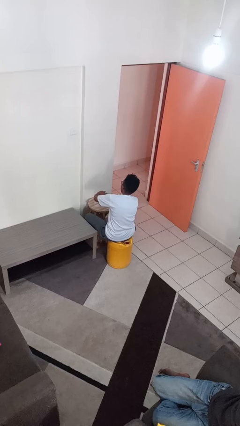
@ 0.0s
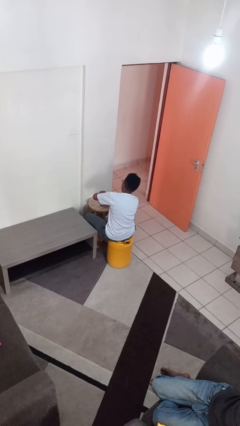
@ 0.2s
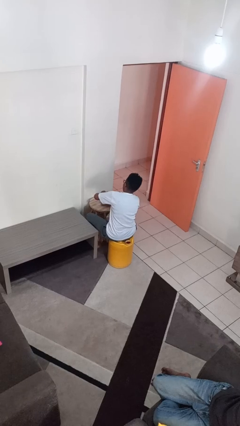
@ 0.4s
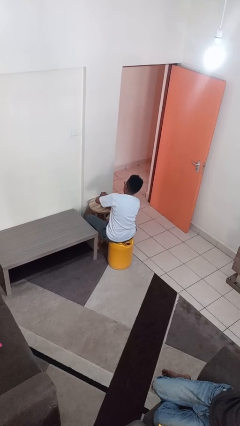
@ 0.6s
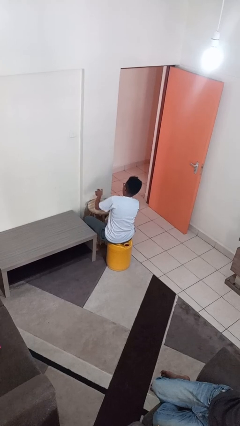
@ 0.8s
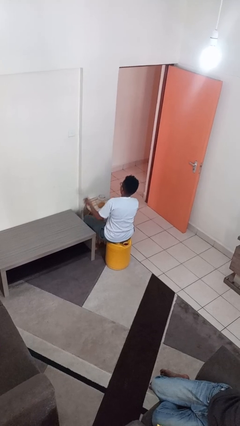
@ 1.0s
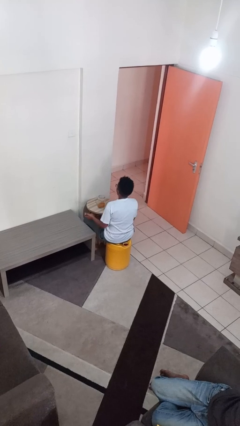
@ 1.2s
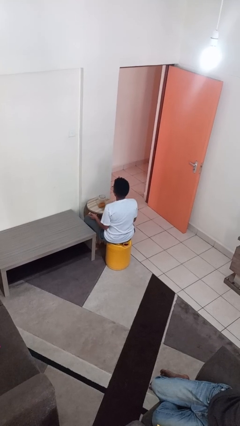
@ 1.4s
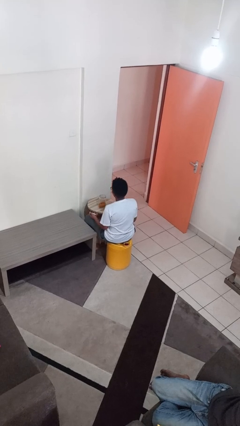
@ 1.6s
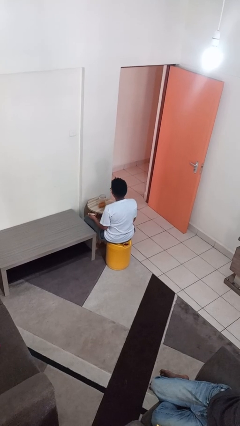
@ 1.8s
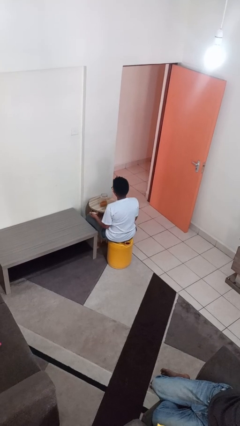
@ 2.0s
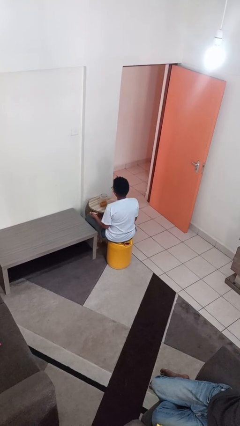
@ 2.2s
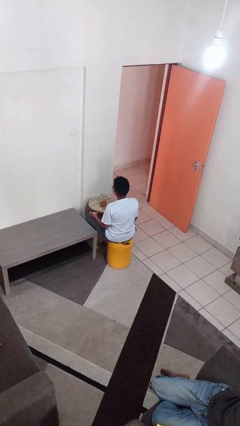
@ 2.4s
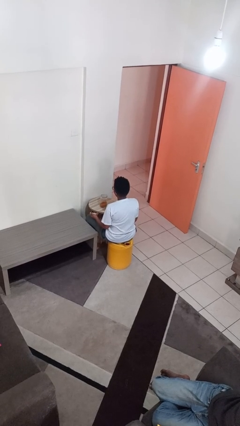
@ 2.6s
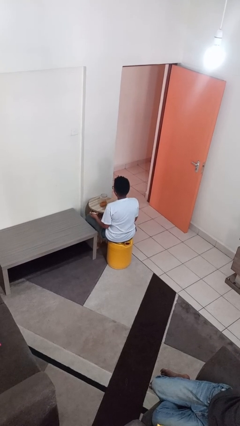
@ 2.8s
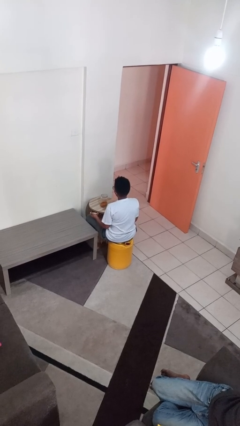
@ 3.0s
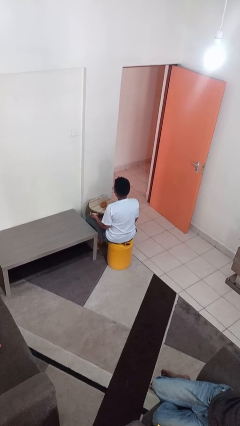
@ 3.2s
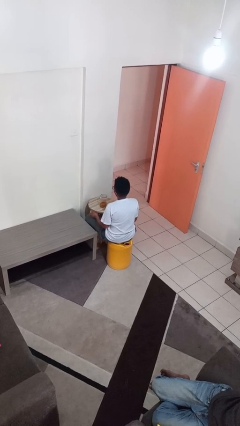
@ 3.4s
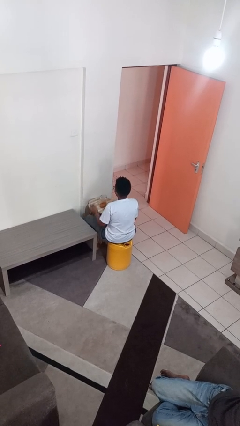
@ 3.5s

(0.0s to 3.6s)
person opens jar

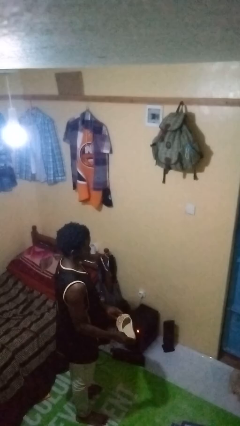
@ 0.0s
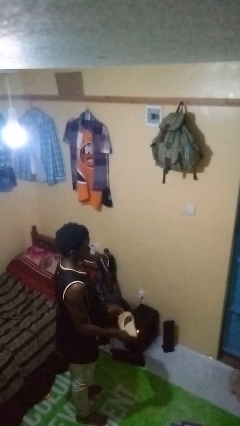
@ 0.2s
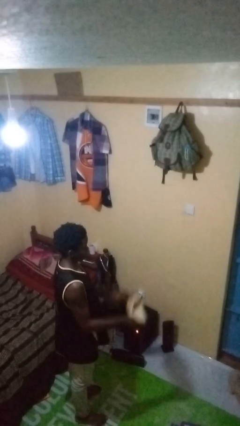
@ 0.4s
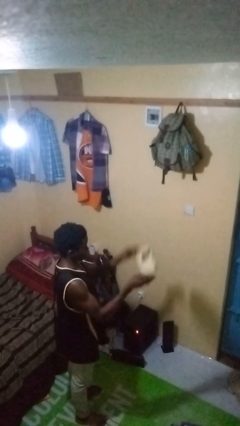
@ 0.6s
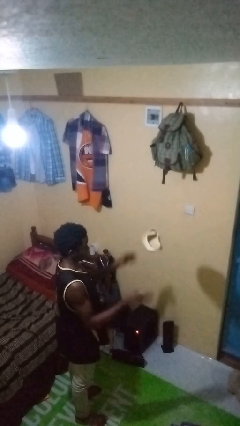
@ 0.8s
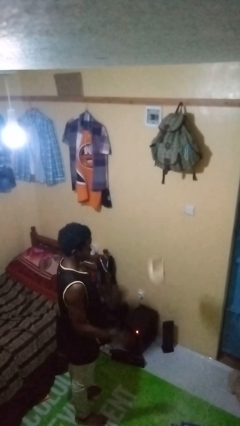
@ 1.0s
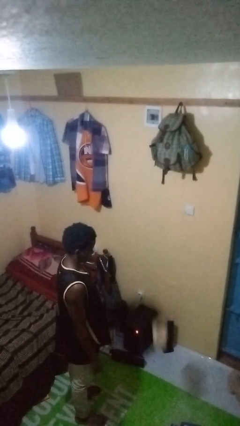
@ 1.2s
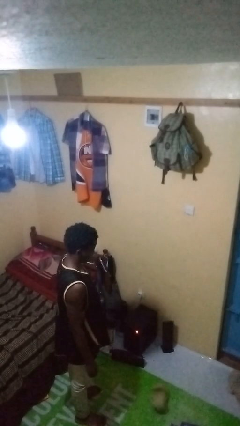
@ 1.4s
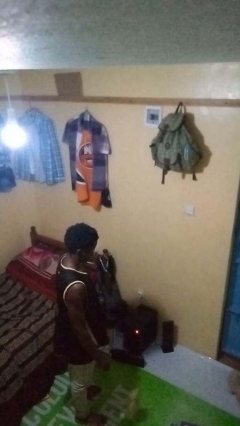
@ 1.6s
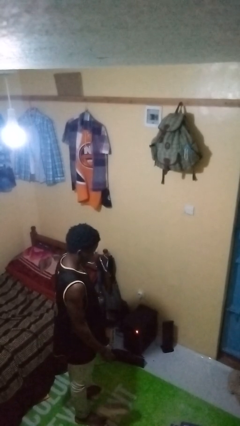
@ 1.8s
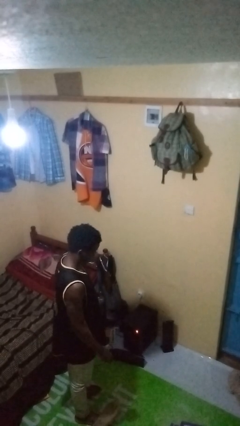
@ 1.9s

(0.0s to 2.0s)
person throws object into air

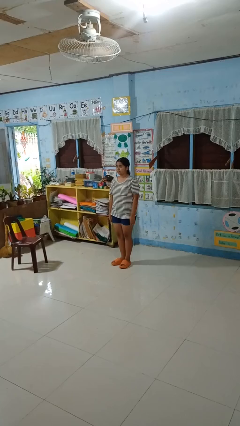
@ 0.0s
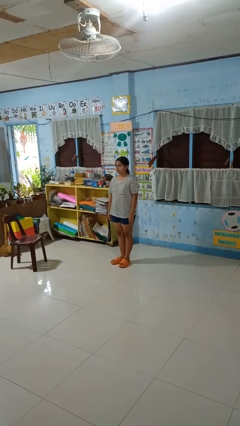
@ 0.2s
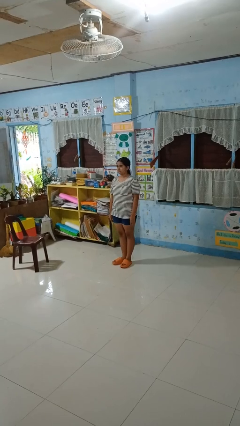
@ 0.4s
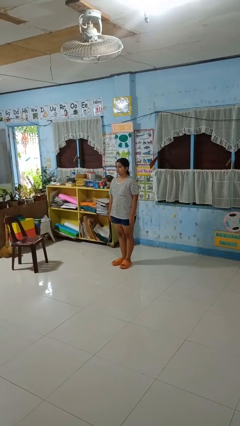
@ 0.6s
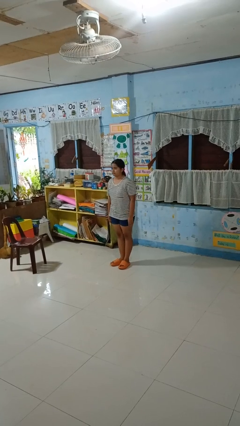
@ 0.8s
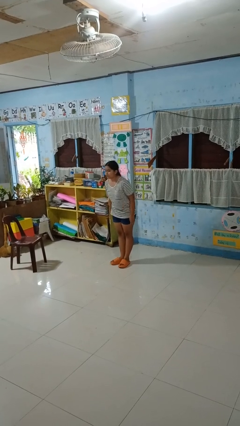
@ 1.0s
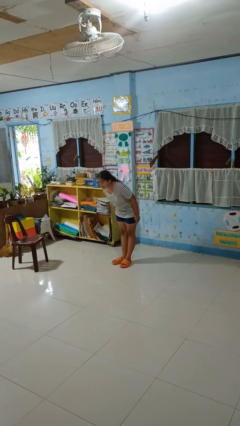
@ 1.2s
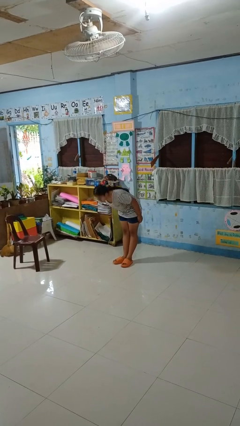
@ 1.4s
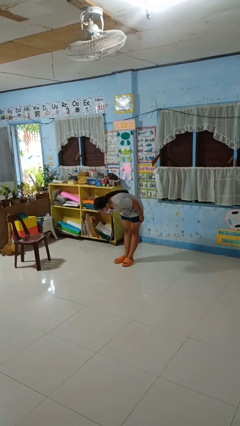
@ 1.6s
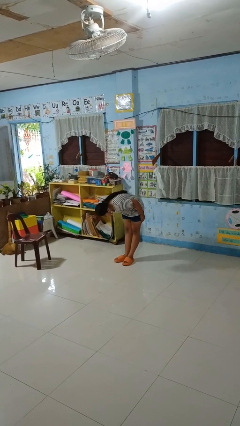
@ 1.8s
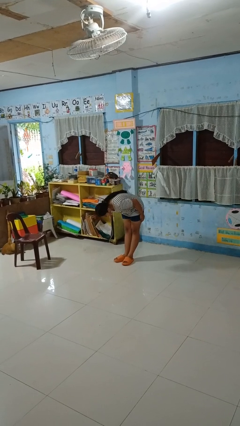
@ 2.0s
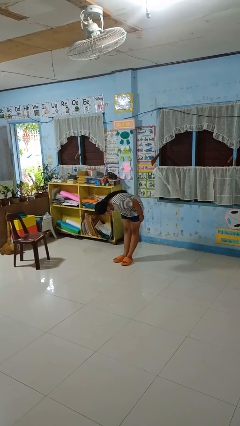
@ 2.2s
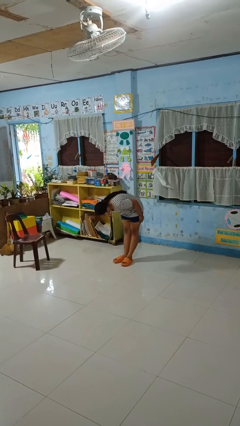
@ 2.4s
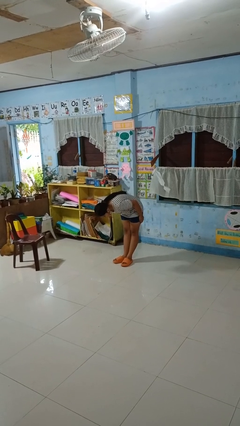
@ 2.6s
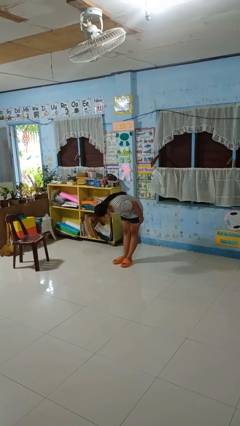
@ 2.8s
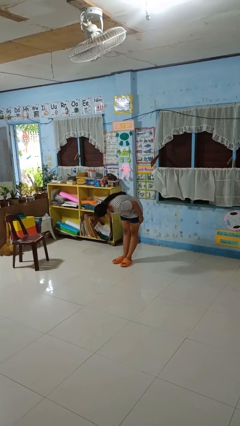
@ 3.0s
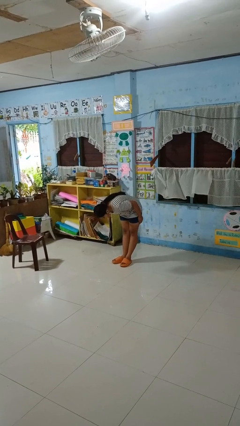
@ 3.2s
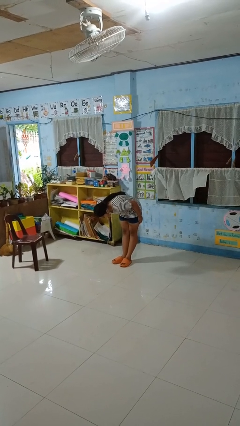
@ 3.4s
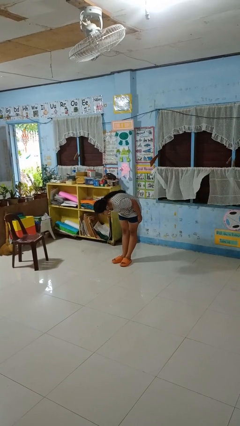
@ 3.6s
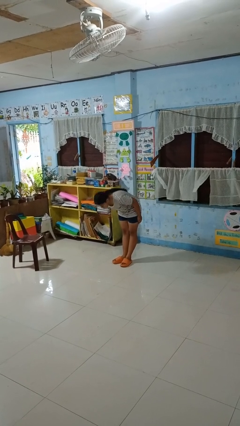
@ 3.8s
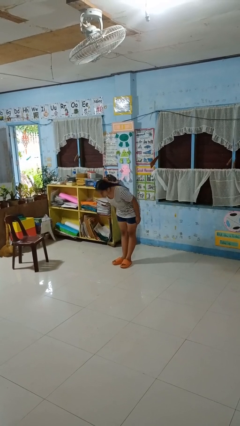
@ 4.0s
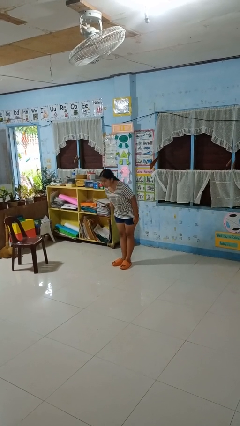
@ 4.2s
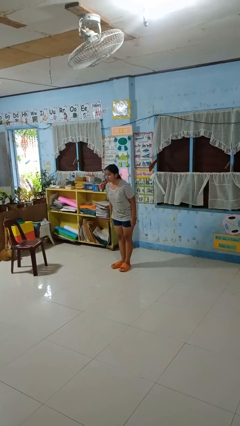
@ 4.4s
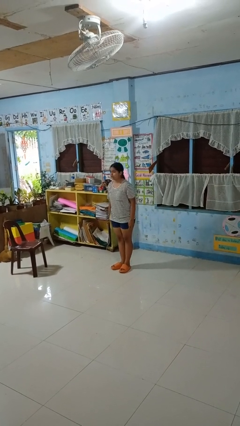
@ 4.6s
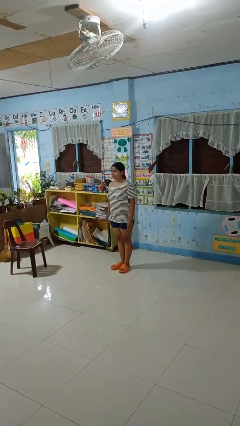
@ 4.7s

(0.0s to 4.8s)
person bows

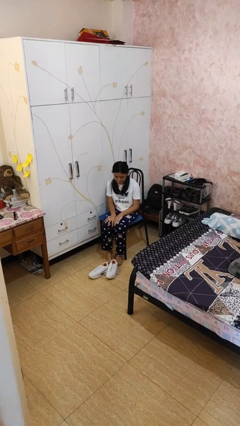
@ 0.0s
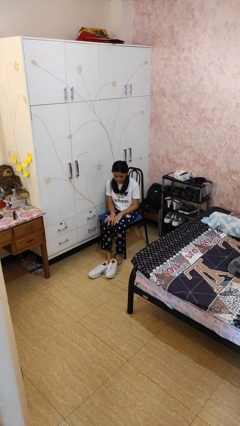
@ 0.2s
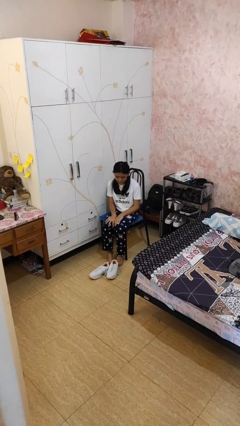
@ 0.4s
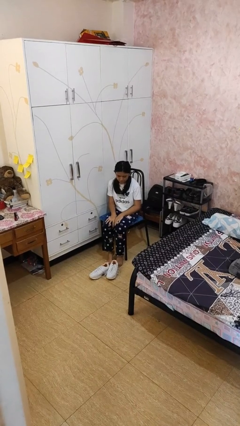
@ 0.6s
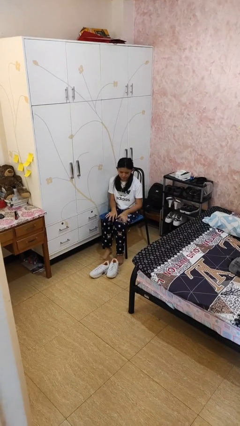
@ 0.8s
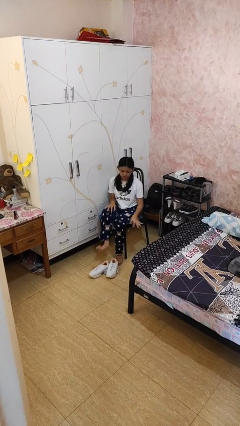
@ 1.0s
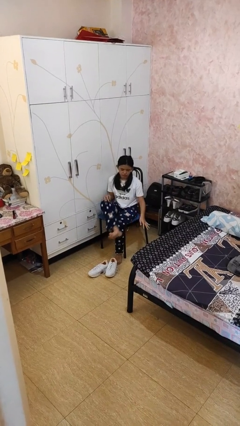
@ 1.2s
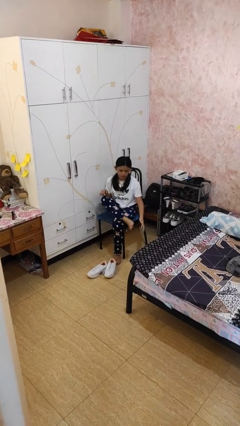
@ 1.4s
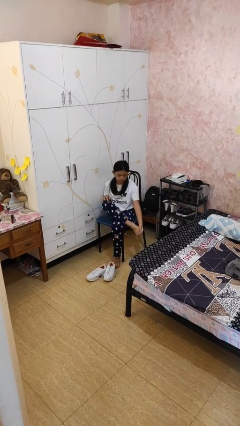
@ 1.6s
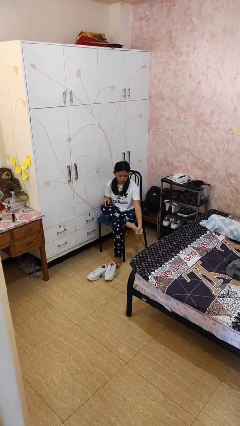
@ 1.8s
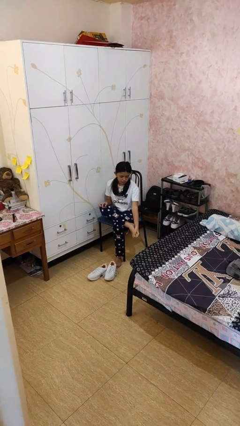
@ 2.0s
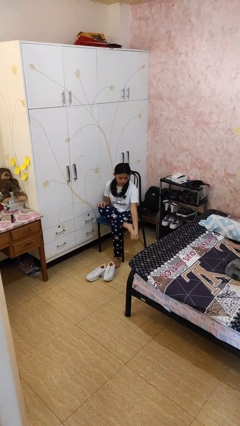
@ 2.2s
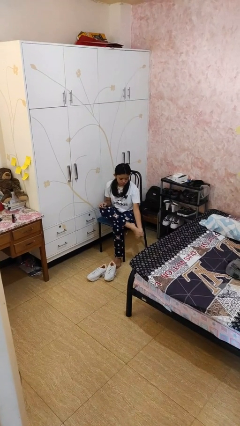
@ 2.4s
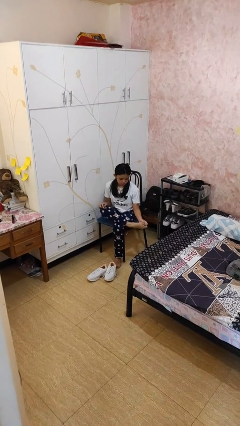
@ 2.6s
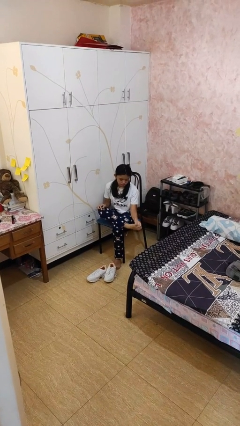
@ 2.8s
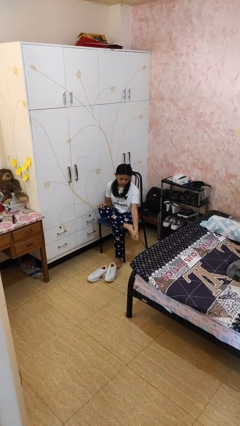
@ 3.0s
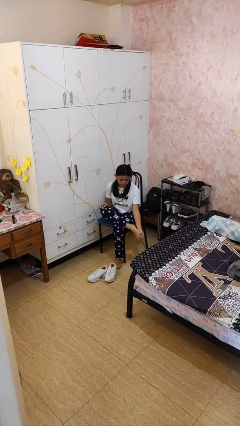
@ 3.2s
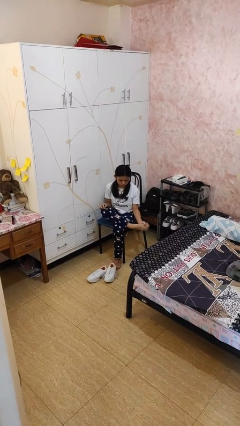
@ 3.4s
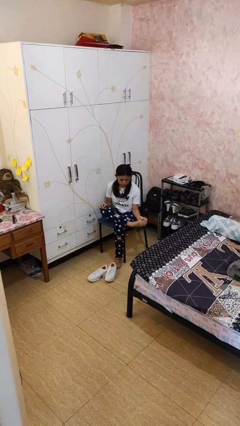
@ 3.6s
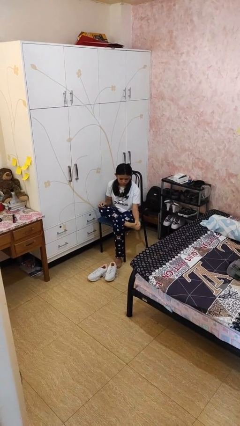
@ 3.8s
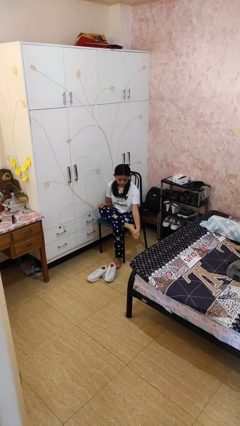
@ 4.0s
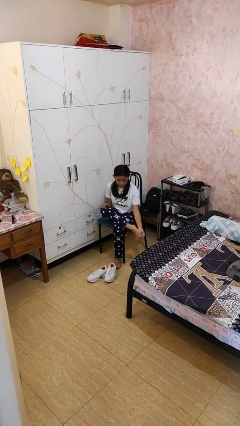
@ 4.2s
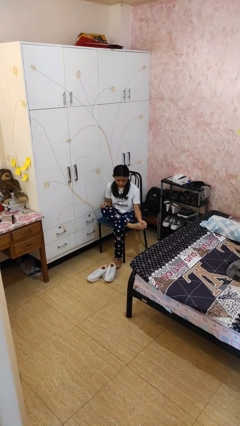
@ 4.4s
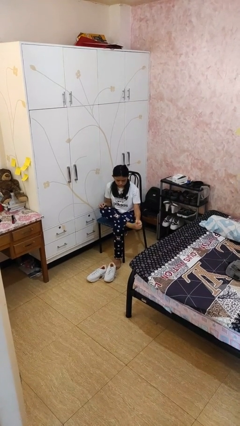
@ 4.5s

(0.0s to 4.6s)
person rubs foot

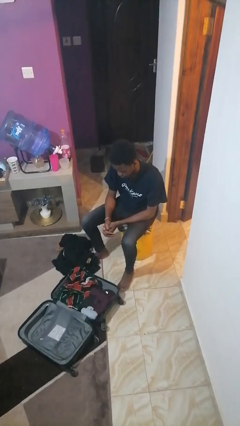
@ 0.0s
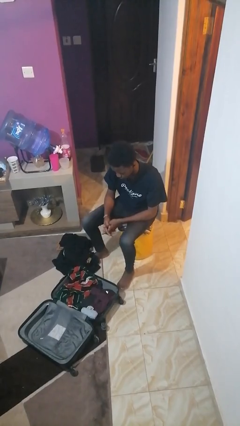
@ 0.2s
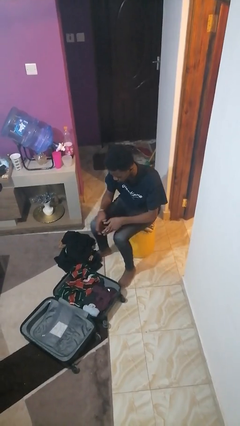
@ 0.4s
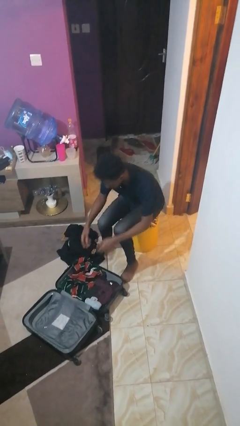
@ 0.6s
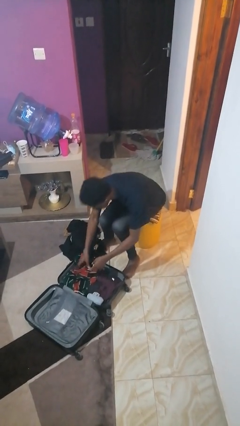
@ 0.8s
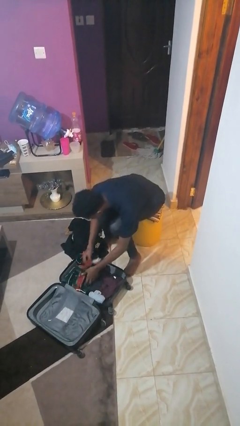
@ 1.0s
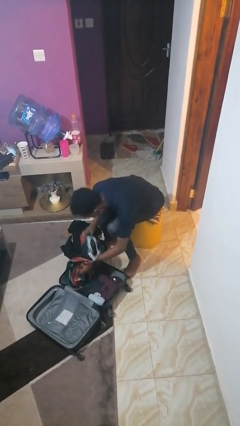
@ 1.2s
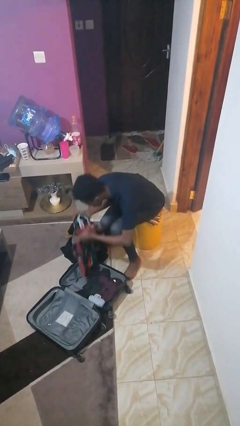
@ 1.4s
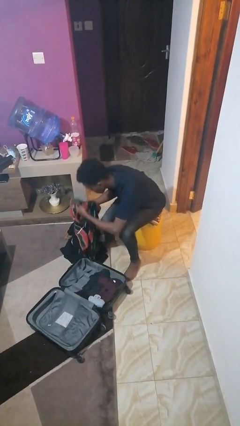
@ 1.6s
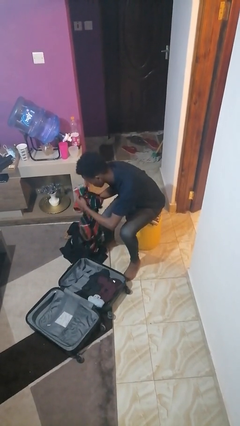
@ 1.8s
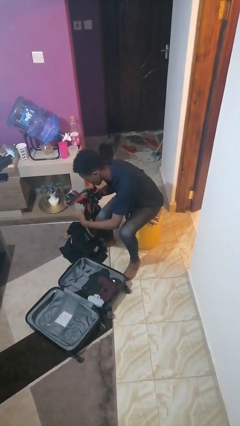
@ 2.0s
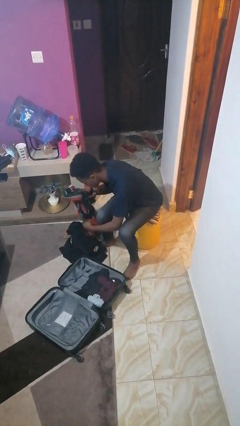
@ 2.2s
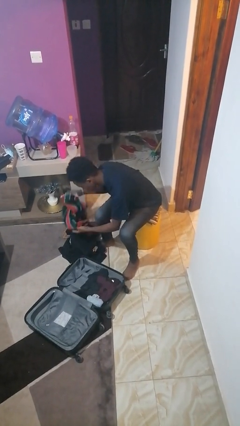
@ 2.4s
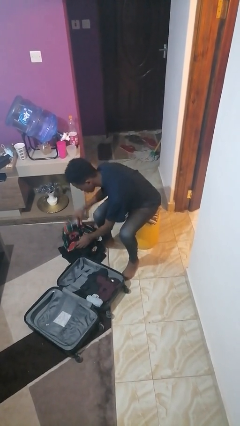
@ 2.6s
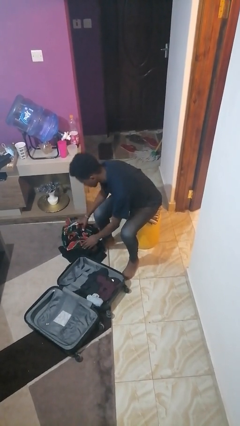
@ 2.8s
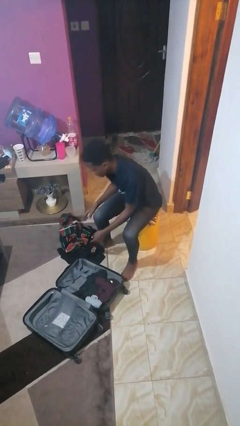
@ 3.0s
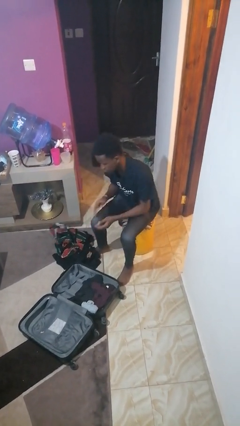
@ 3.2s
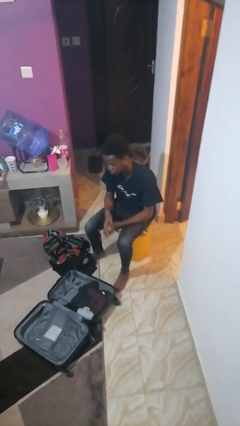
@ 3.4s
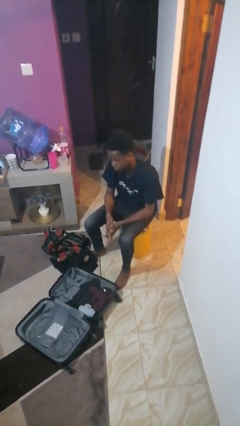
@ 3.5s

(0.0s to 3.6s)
person unloads clothes from suitcase
